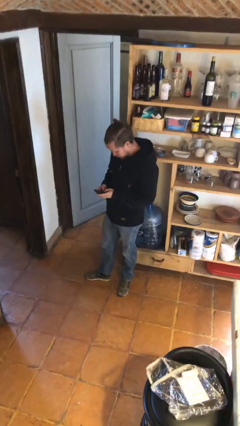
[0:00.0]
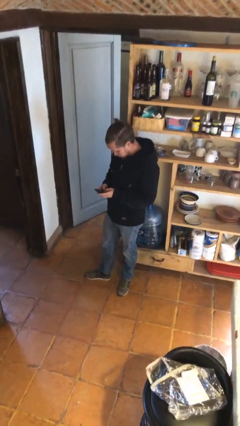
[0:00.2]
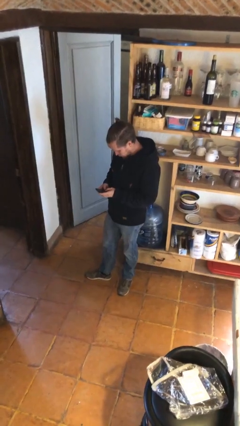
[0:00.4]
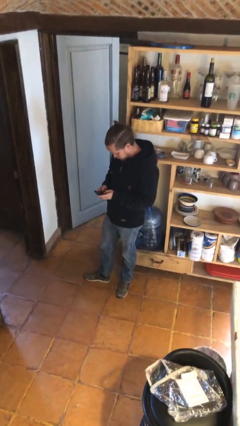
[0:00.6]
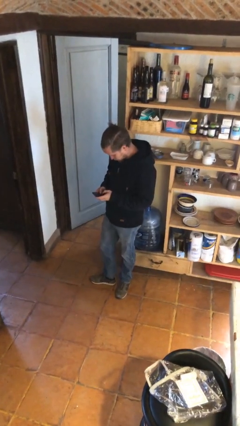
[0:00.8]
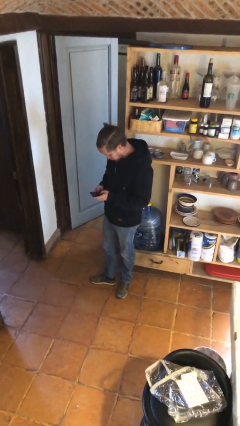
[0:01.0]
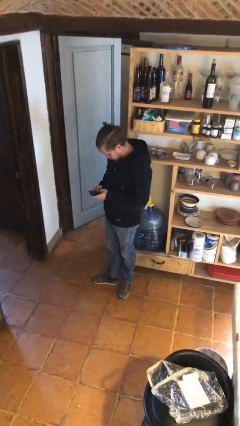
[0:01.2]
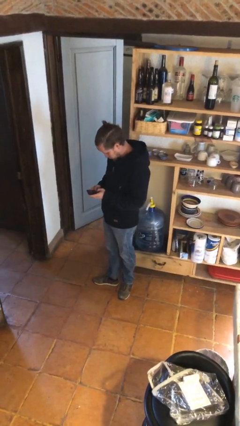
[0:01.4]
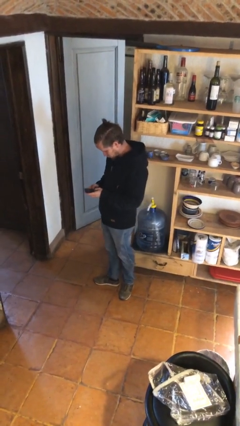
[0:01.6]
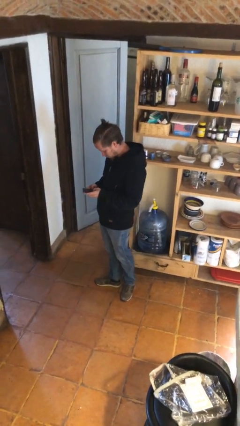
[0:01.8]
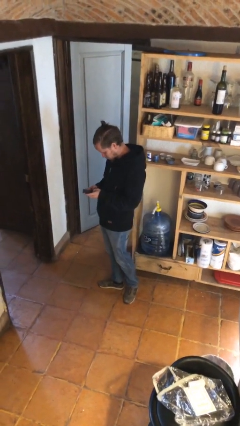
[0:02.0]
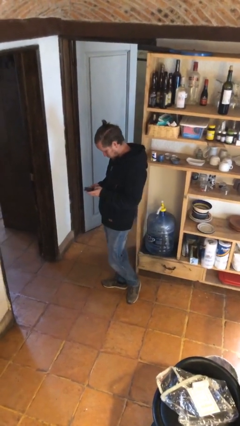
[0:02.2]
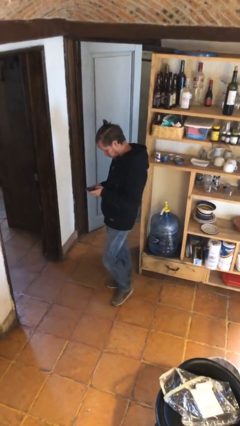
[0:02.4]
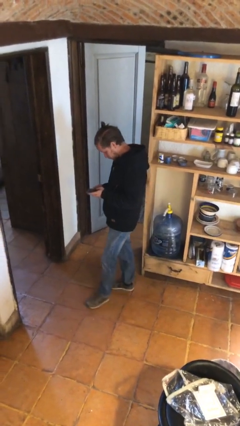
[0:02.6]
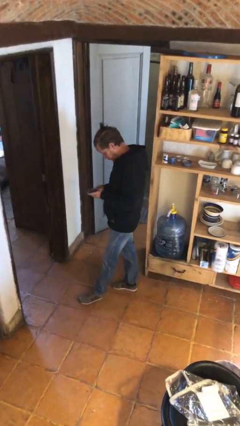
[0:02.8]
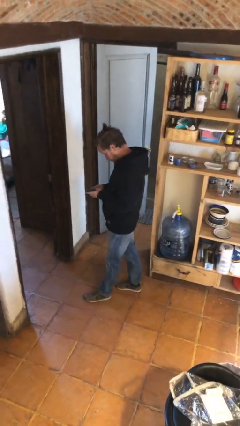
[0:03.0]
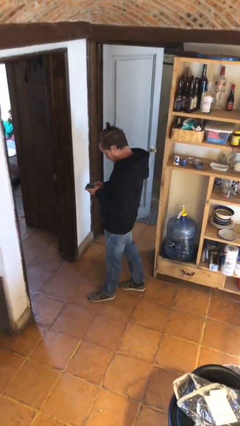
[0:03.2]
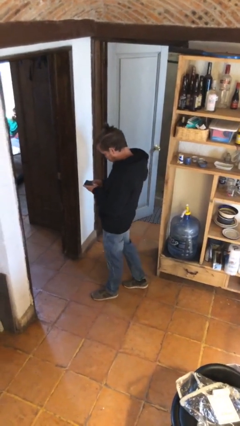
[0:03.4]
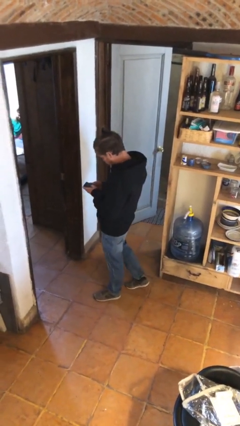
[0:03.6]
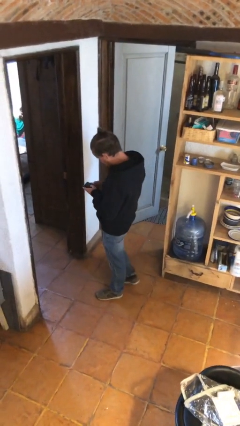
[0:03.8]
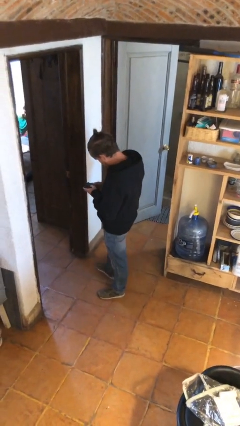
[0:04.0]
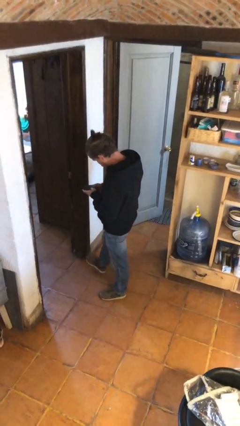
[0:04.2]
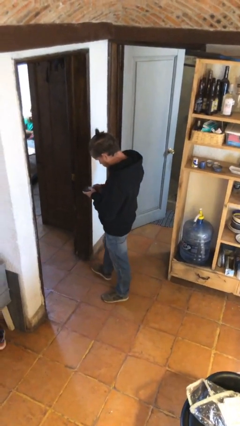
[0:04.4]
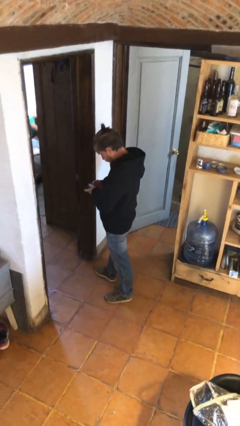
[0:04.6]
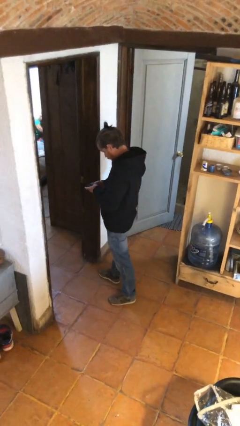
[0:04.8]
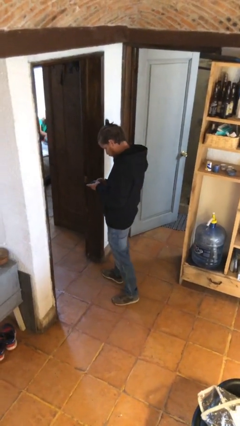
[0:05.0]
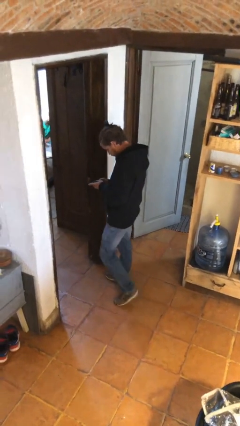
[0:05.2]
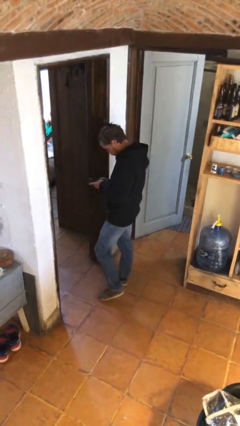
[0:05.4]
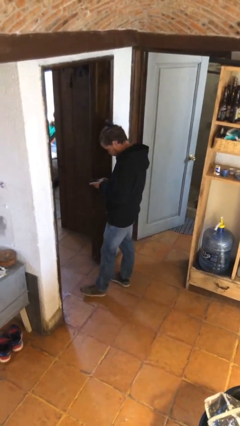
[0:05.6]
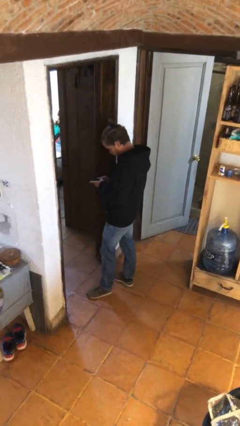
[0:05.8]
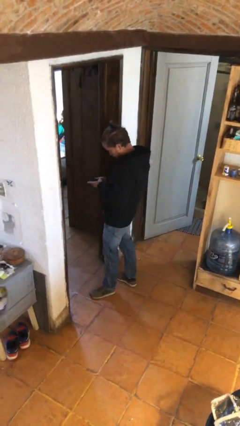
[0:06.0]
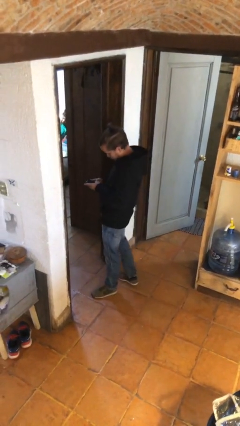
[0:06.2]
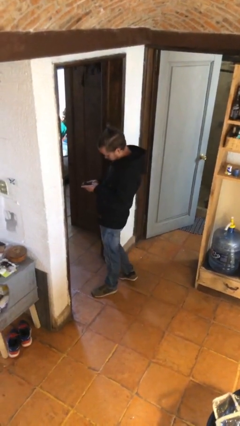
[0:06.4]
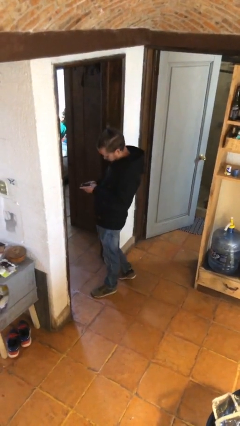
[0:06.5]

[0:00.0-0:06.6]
person texts on phone

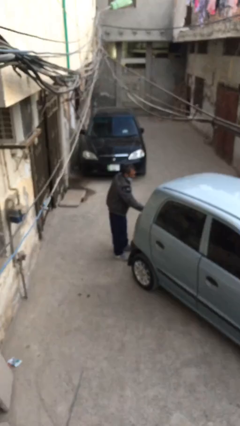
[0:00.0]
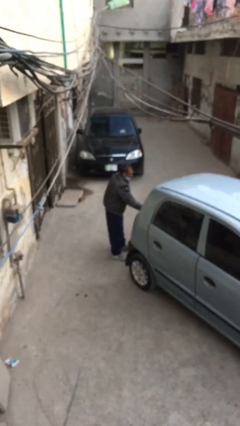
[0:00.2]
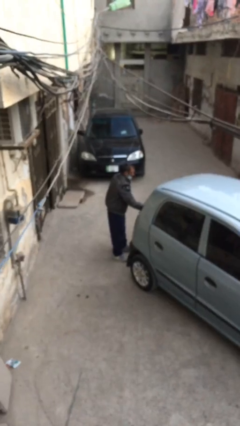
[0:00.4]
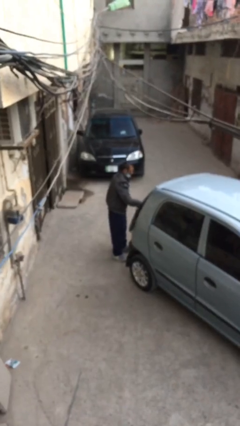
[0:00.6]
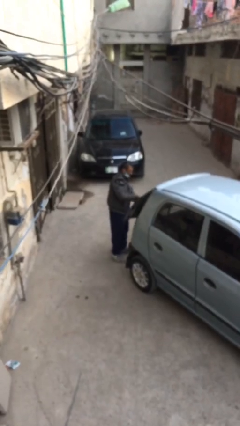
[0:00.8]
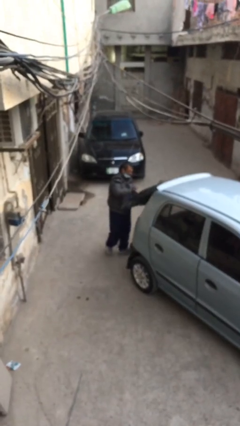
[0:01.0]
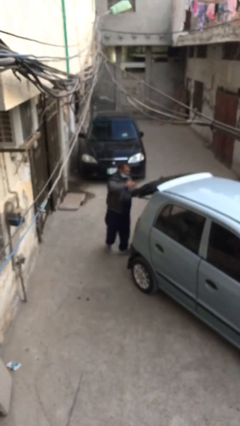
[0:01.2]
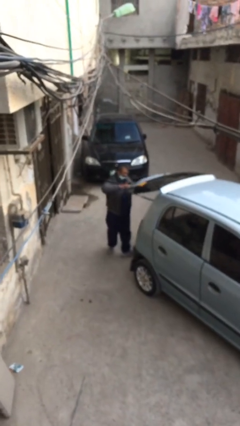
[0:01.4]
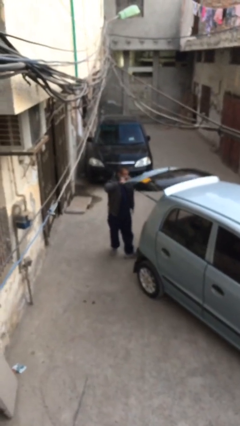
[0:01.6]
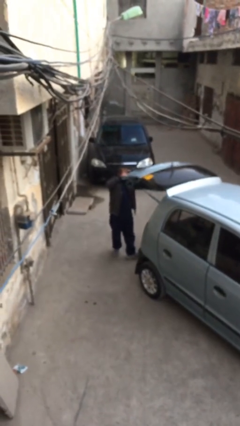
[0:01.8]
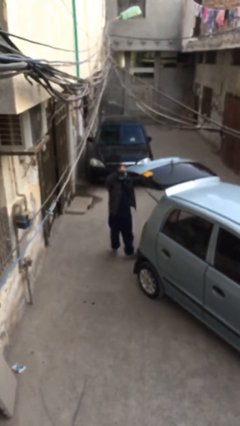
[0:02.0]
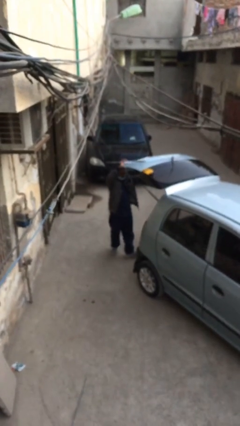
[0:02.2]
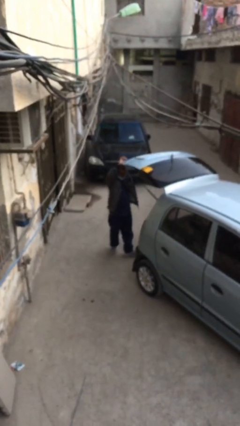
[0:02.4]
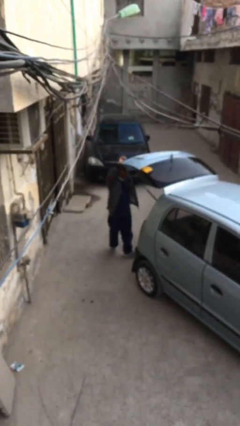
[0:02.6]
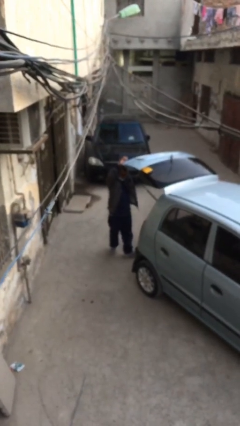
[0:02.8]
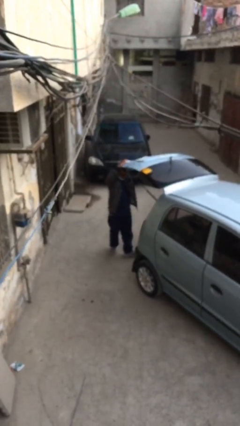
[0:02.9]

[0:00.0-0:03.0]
person opens car trunk

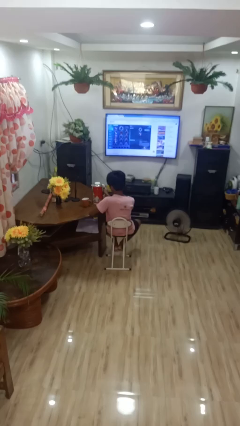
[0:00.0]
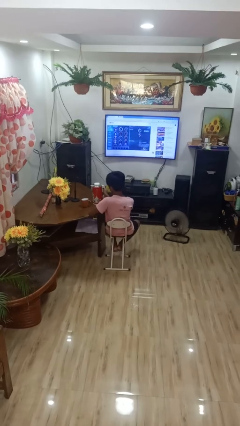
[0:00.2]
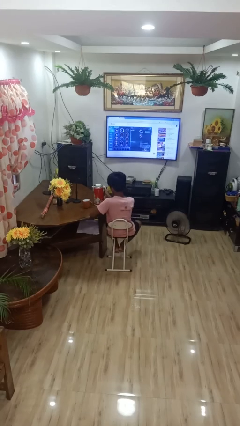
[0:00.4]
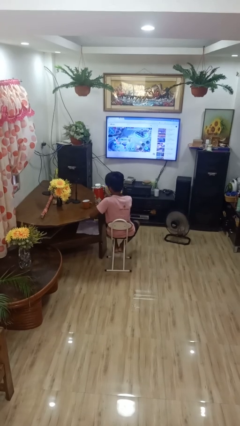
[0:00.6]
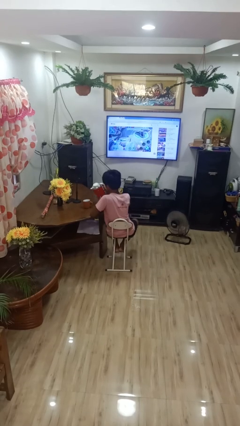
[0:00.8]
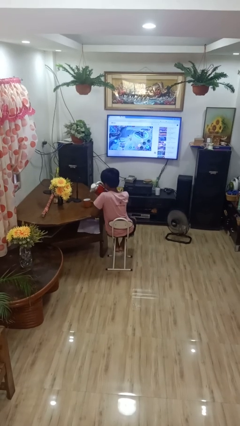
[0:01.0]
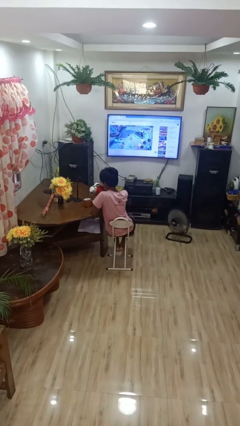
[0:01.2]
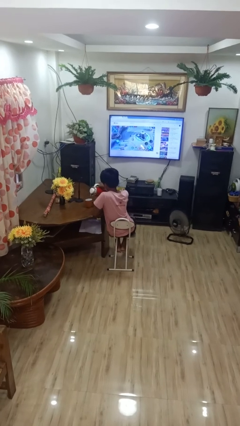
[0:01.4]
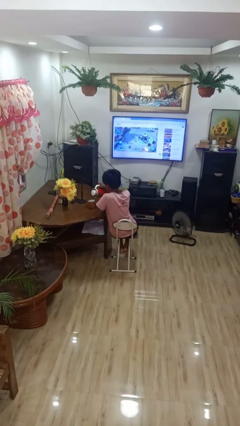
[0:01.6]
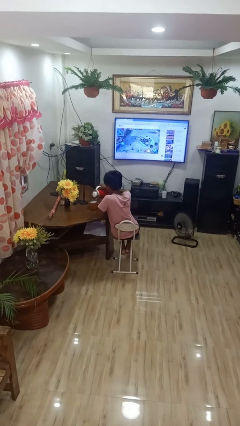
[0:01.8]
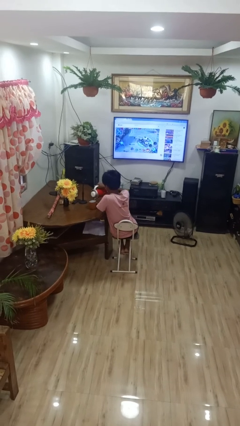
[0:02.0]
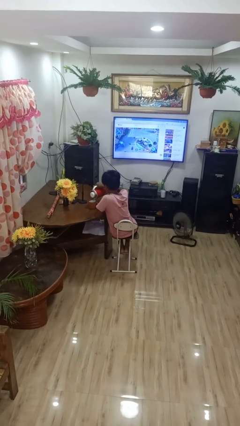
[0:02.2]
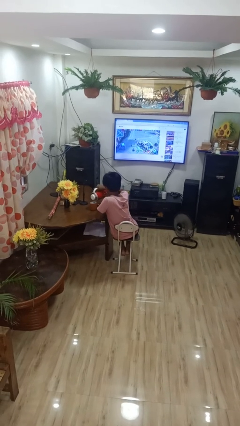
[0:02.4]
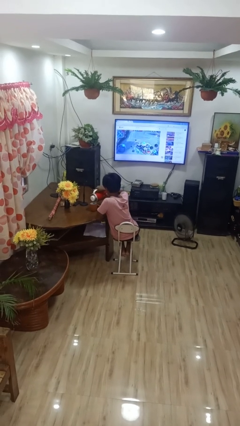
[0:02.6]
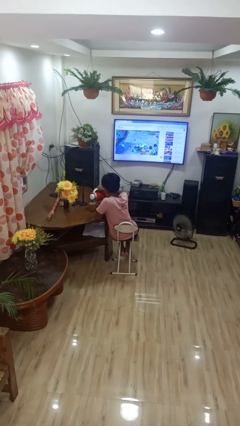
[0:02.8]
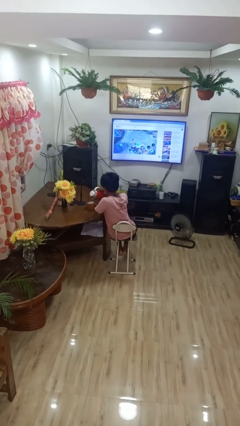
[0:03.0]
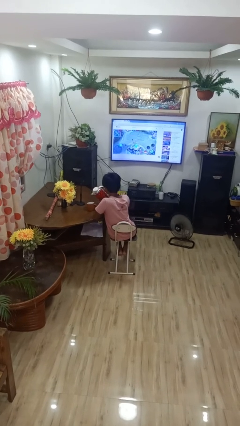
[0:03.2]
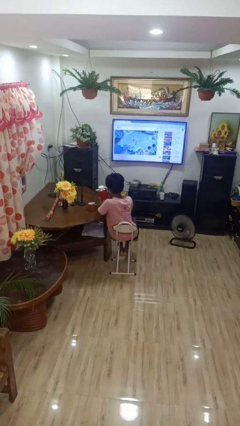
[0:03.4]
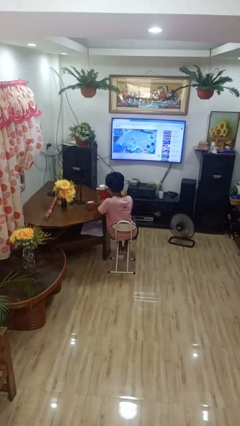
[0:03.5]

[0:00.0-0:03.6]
person pours coffee into mug

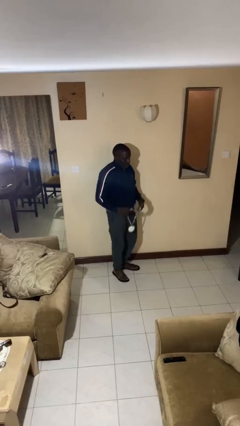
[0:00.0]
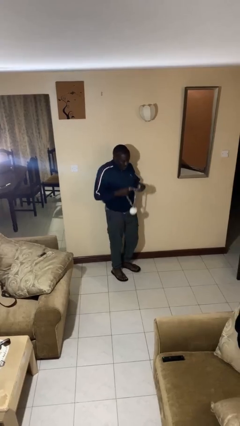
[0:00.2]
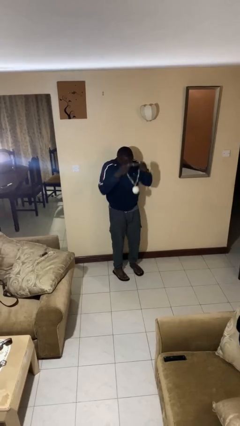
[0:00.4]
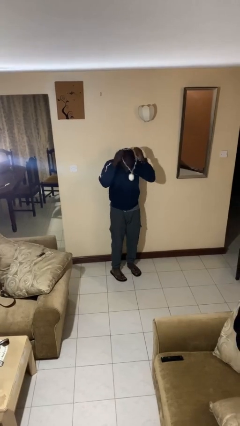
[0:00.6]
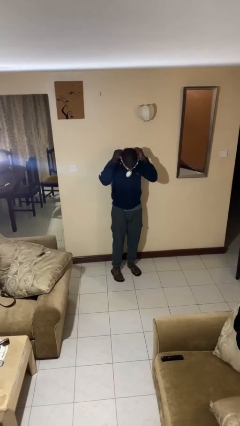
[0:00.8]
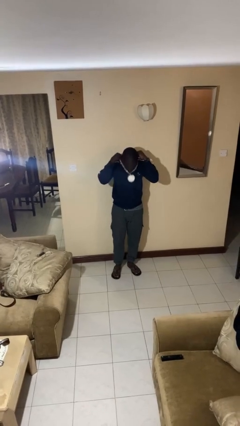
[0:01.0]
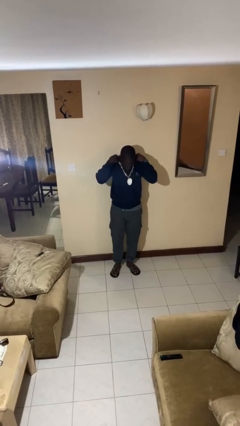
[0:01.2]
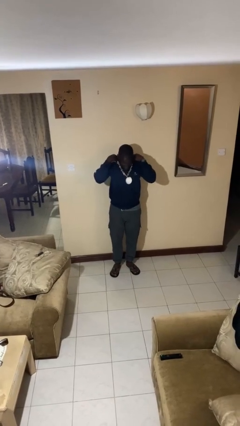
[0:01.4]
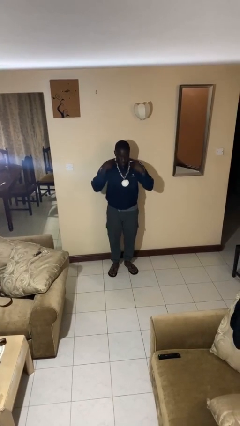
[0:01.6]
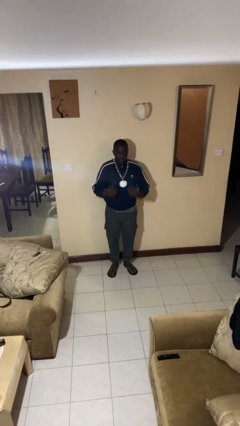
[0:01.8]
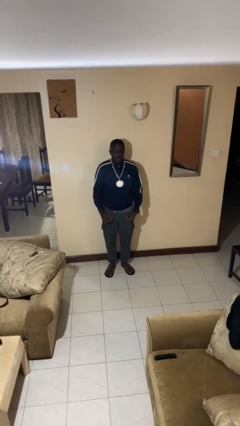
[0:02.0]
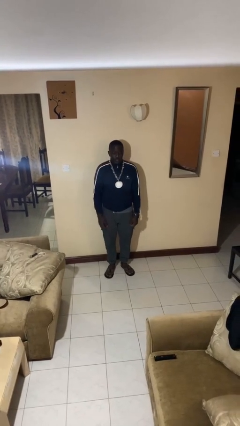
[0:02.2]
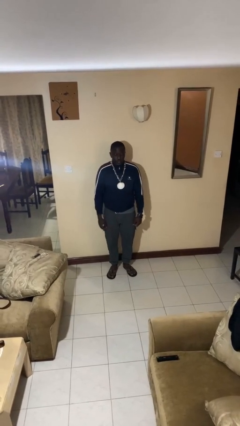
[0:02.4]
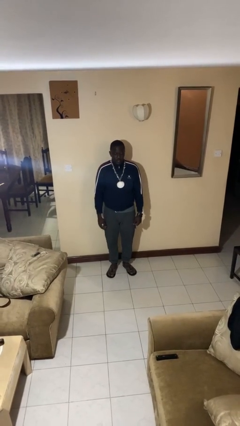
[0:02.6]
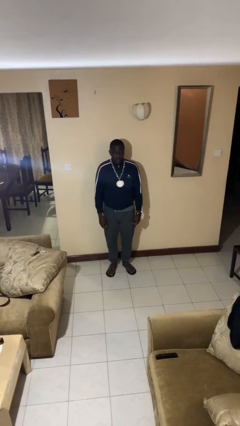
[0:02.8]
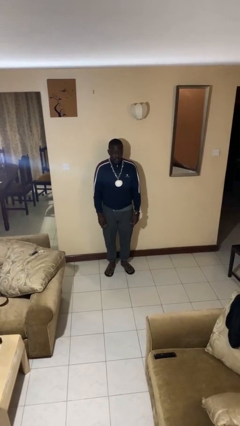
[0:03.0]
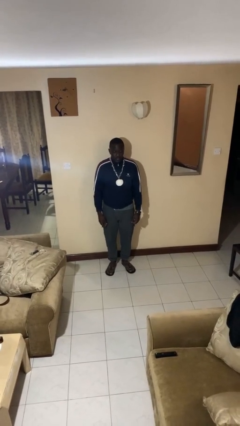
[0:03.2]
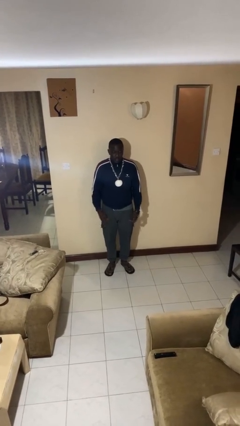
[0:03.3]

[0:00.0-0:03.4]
person puts on necklace

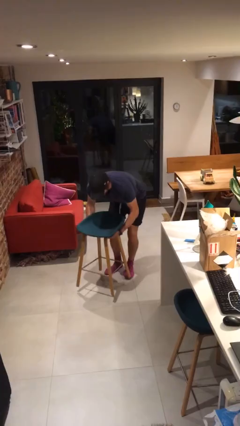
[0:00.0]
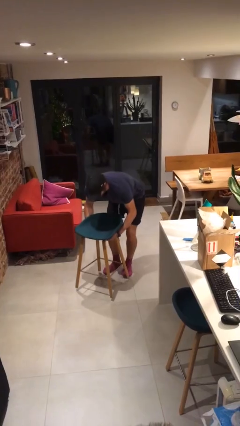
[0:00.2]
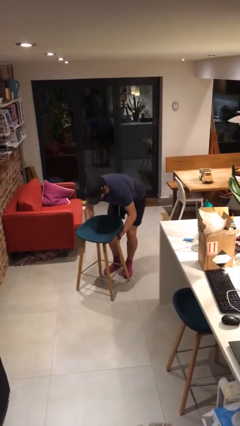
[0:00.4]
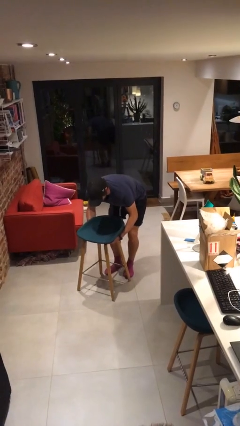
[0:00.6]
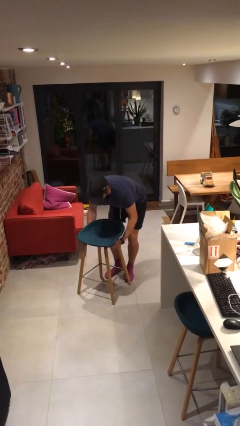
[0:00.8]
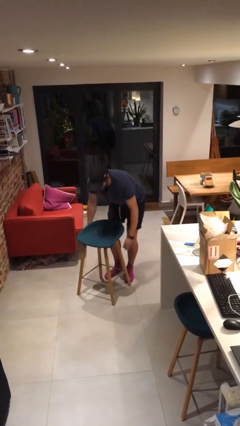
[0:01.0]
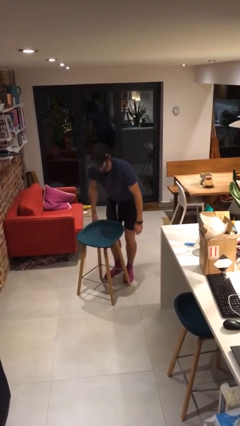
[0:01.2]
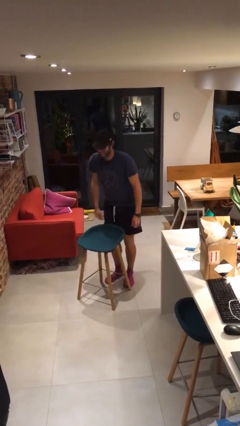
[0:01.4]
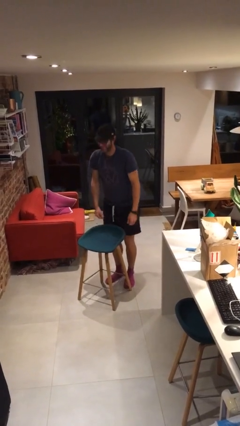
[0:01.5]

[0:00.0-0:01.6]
person puts down object on floor
